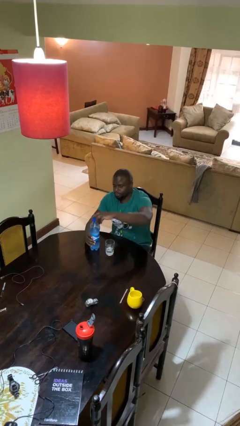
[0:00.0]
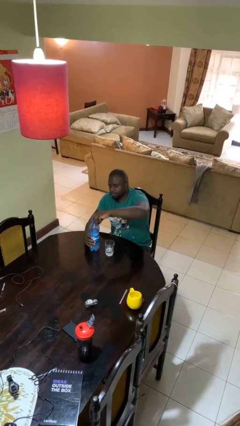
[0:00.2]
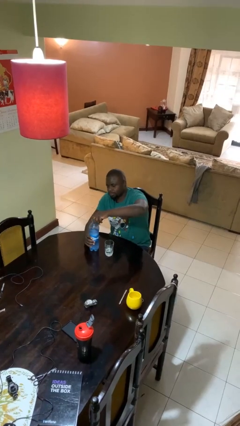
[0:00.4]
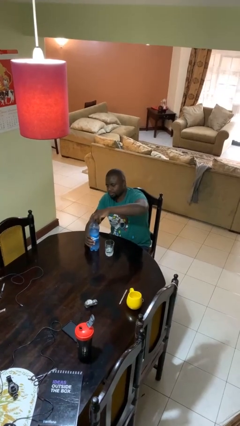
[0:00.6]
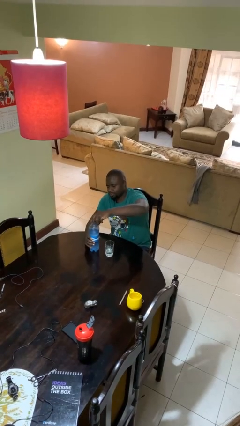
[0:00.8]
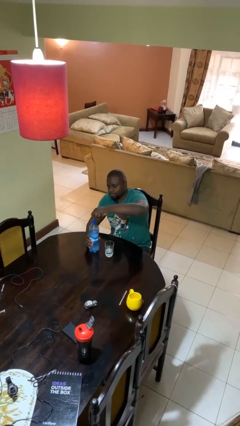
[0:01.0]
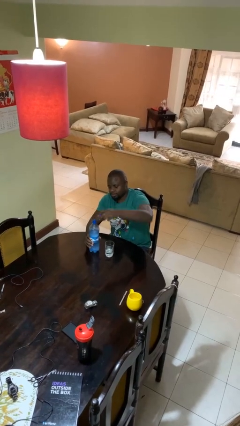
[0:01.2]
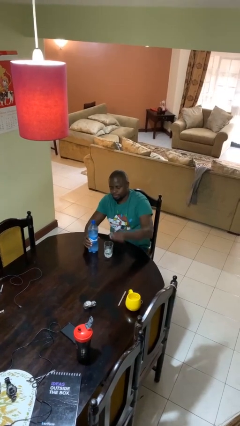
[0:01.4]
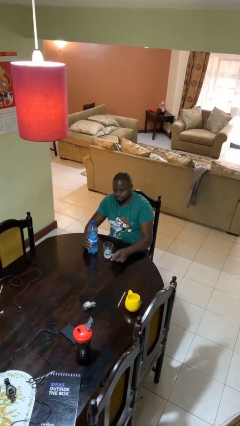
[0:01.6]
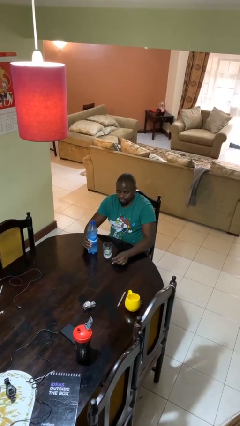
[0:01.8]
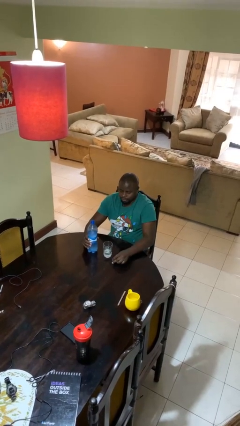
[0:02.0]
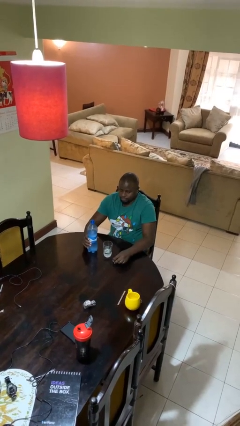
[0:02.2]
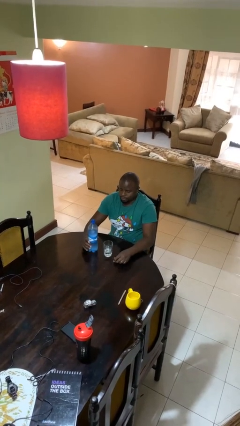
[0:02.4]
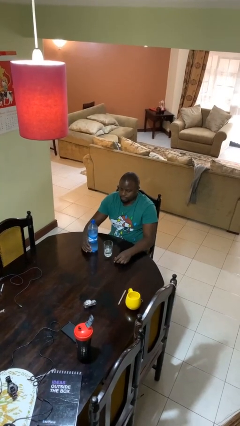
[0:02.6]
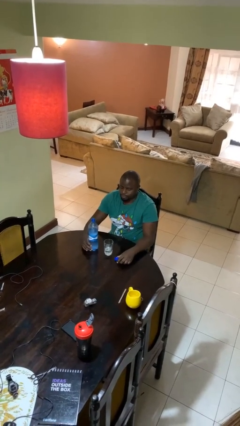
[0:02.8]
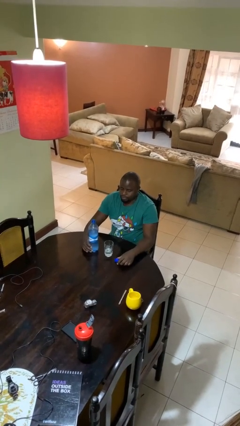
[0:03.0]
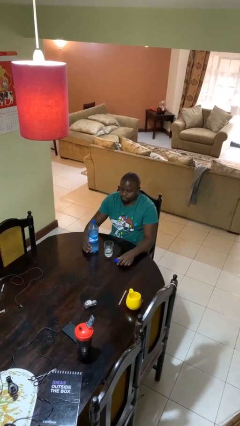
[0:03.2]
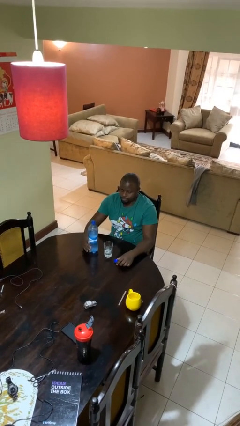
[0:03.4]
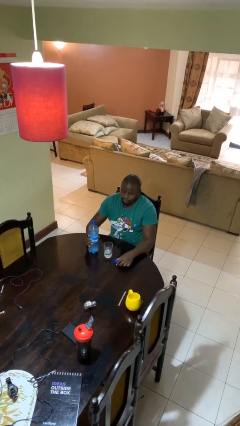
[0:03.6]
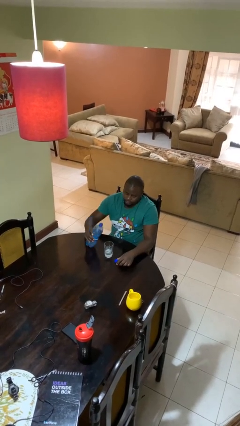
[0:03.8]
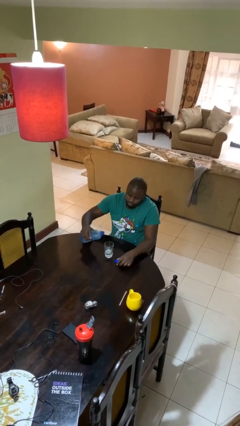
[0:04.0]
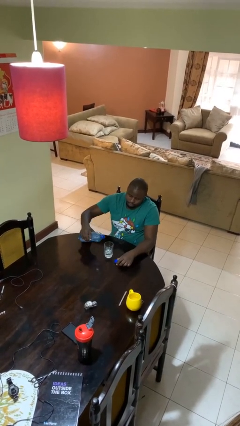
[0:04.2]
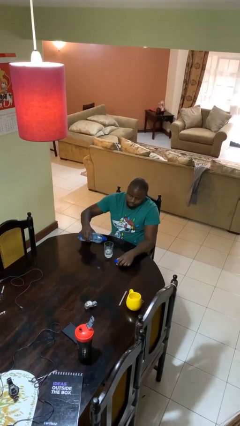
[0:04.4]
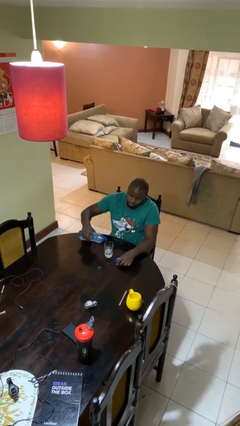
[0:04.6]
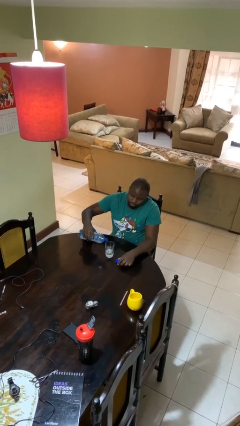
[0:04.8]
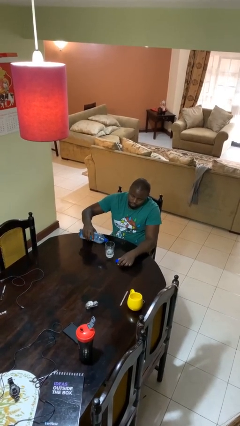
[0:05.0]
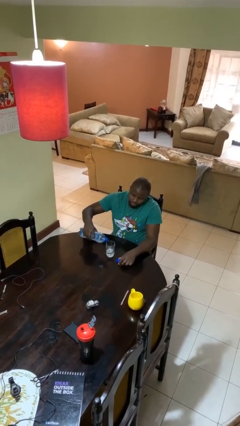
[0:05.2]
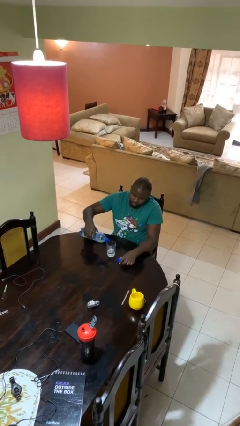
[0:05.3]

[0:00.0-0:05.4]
person unscrews lid from bottle

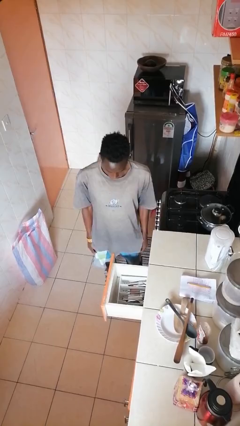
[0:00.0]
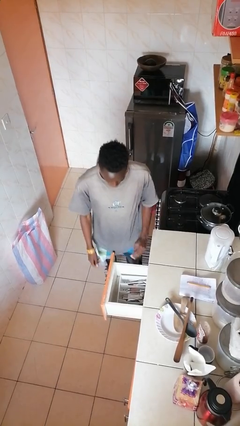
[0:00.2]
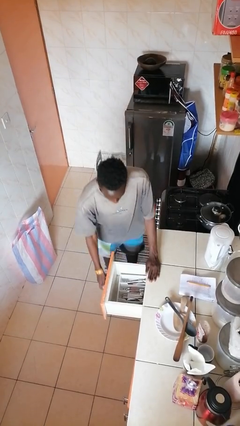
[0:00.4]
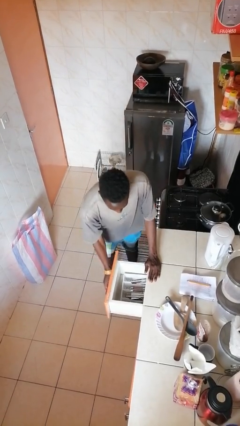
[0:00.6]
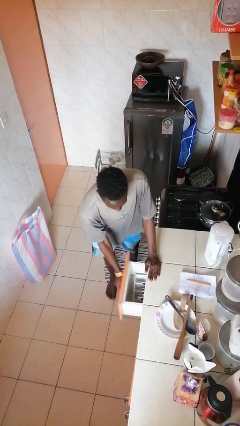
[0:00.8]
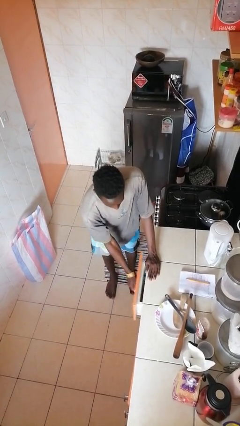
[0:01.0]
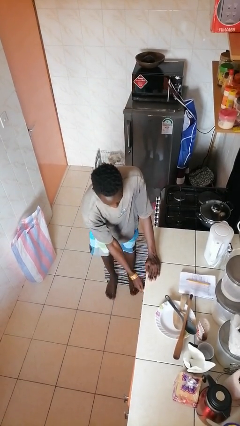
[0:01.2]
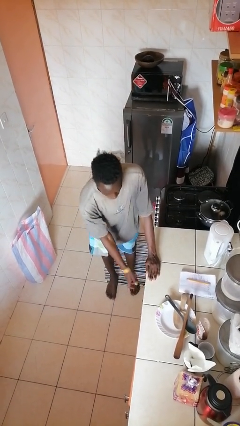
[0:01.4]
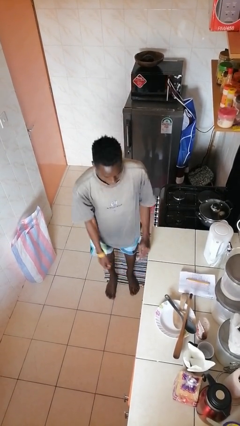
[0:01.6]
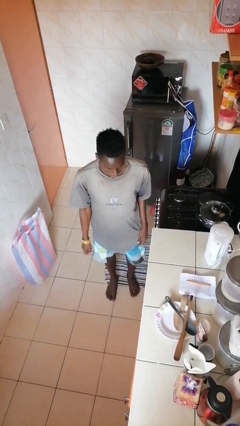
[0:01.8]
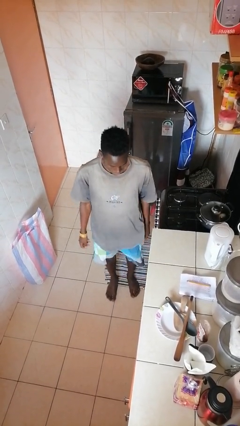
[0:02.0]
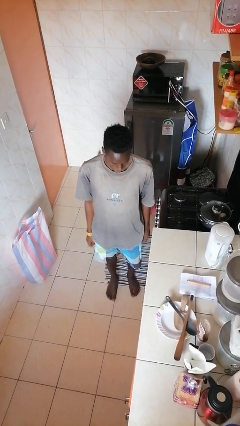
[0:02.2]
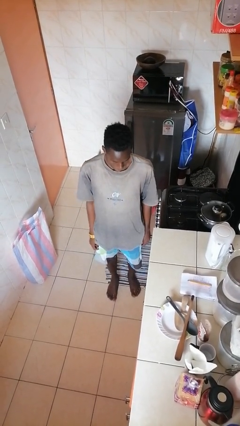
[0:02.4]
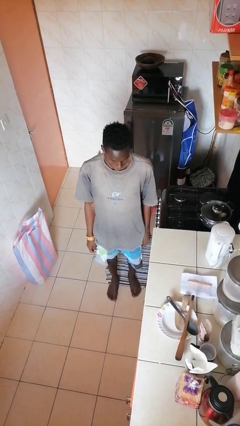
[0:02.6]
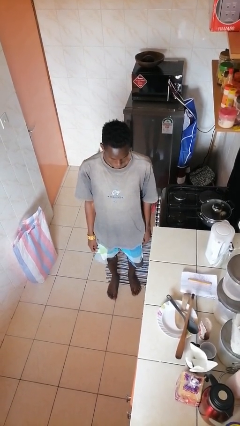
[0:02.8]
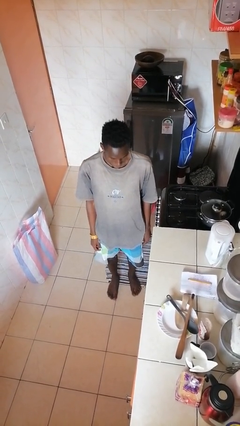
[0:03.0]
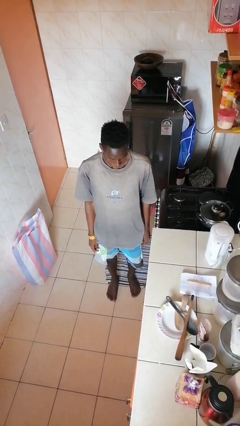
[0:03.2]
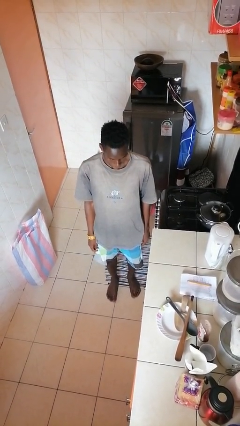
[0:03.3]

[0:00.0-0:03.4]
person closes kitchen drawer

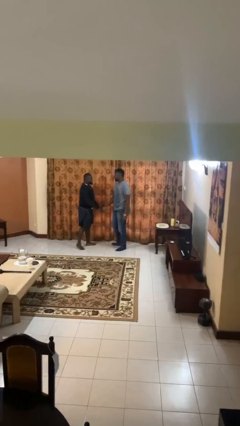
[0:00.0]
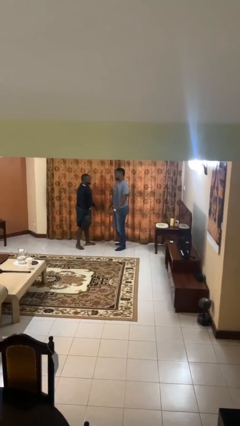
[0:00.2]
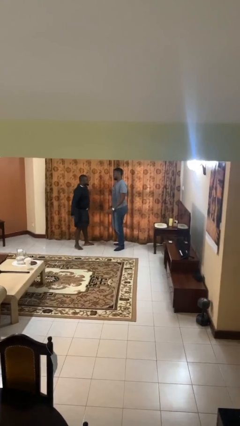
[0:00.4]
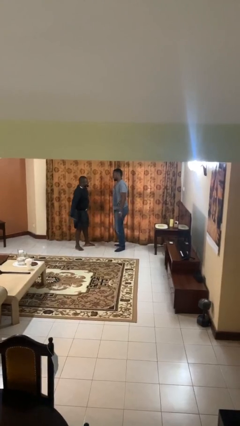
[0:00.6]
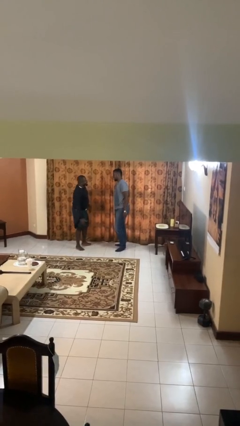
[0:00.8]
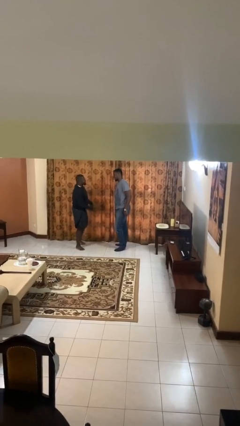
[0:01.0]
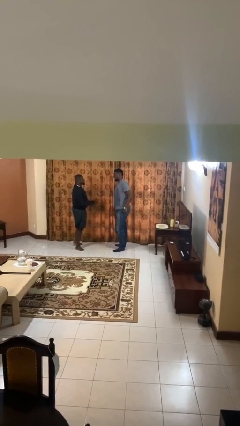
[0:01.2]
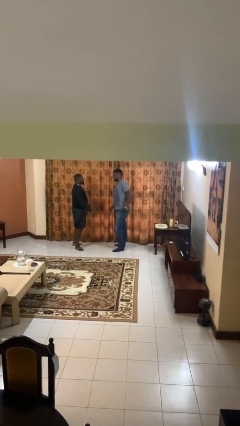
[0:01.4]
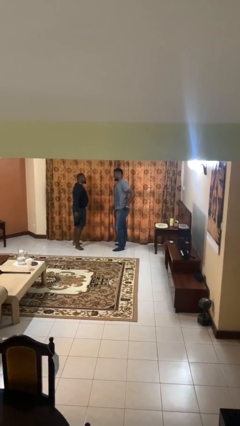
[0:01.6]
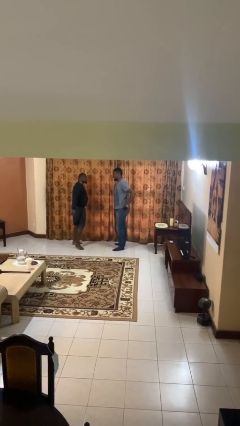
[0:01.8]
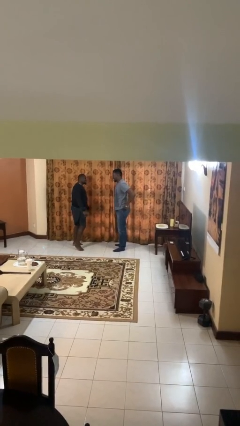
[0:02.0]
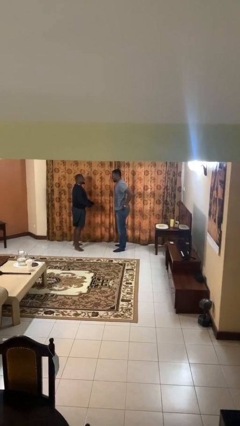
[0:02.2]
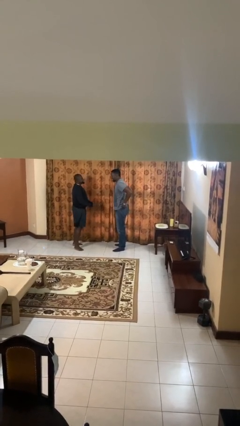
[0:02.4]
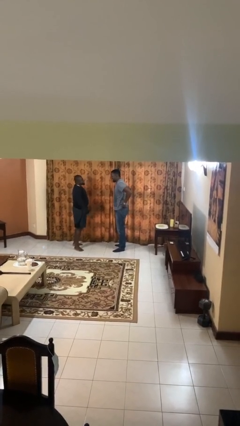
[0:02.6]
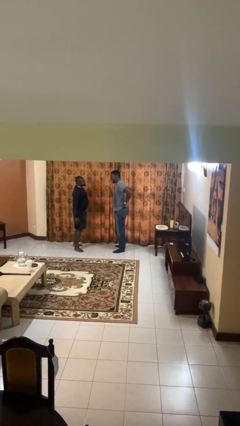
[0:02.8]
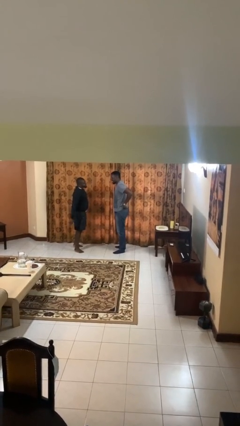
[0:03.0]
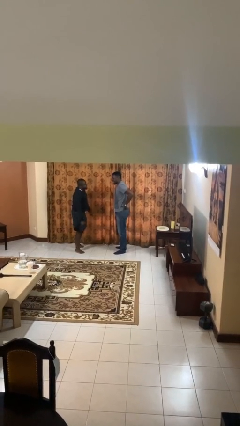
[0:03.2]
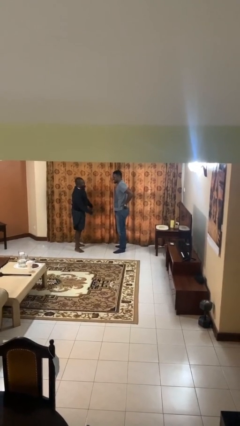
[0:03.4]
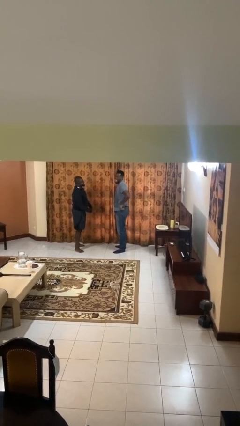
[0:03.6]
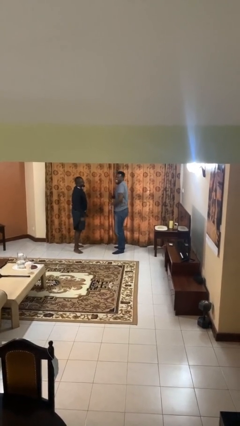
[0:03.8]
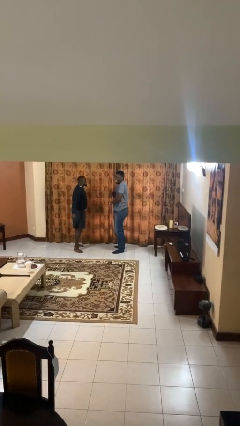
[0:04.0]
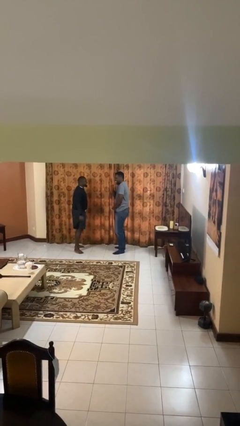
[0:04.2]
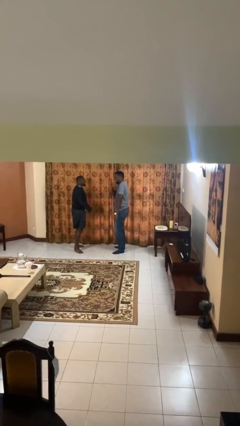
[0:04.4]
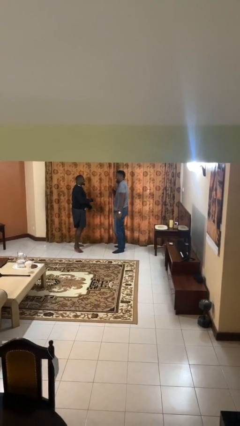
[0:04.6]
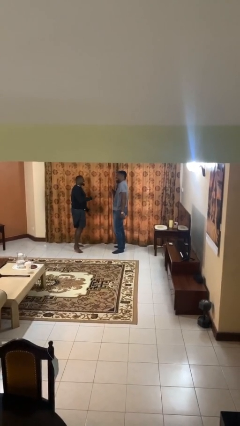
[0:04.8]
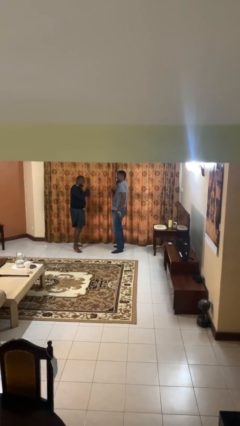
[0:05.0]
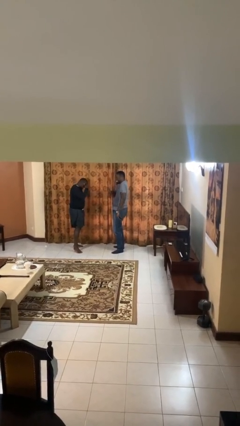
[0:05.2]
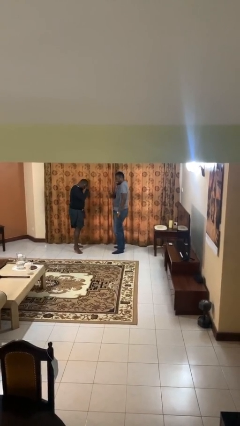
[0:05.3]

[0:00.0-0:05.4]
person talks to person

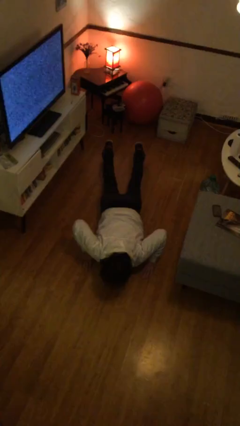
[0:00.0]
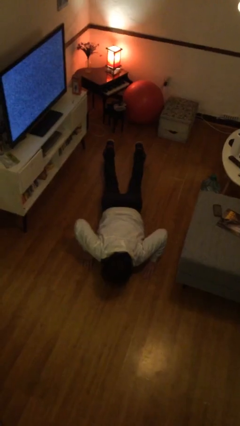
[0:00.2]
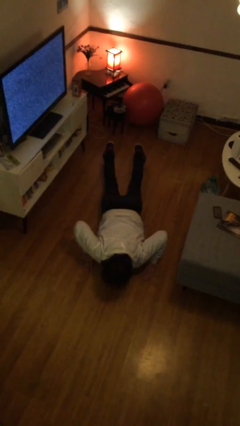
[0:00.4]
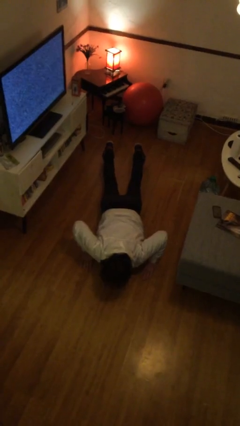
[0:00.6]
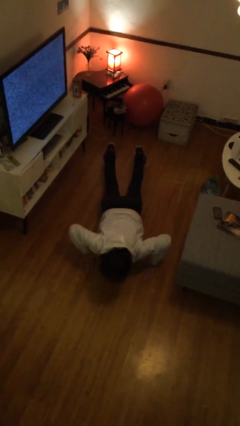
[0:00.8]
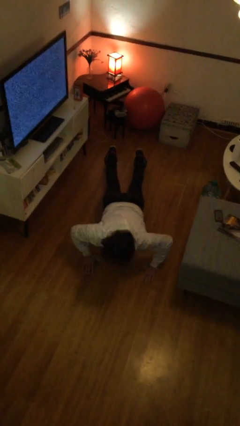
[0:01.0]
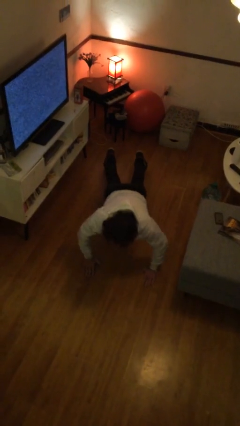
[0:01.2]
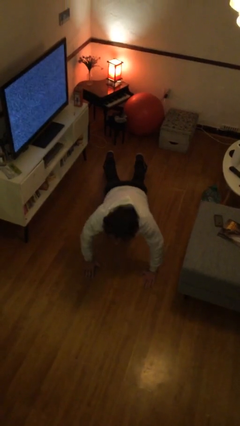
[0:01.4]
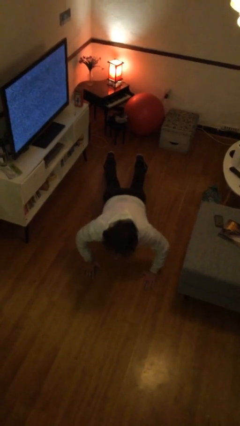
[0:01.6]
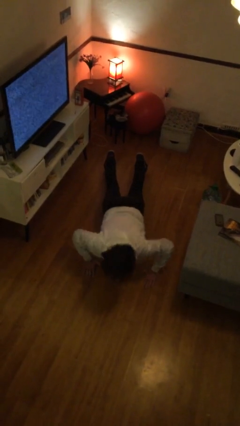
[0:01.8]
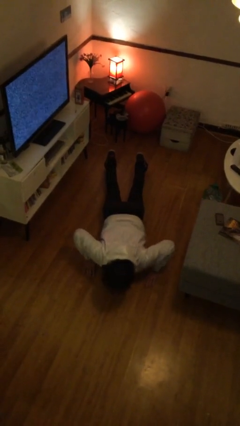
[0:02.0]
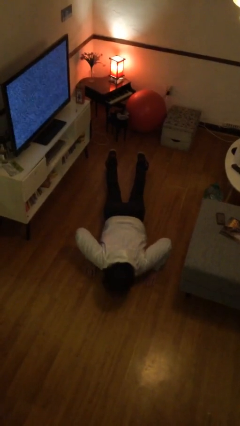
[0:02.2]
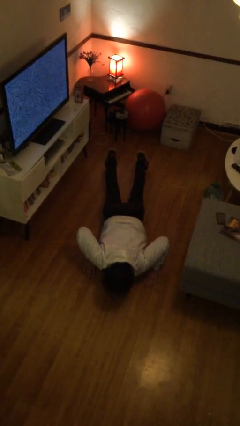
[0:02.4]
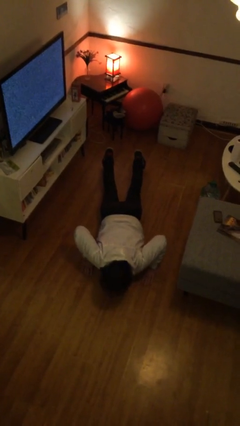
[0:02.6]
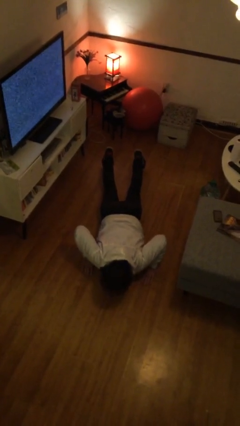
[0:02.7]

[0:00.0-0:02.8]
person exercises with pushup

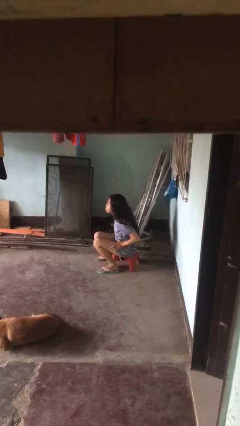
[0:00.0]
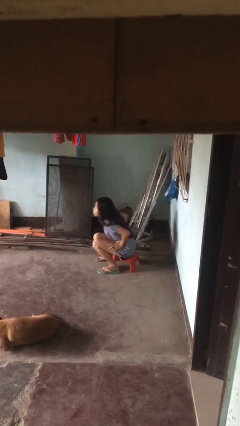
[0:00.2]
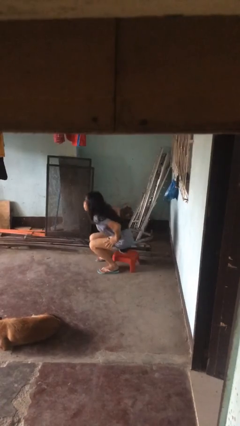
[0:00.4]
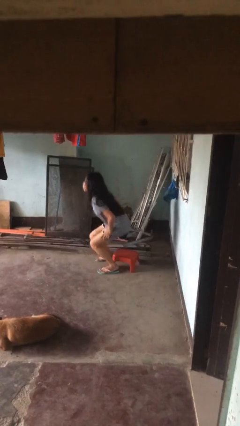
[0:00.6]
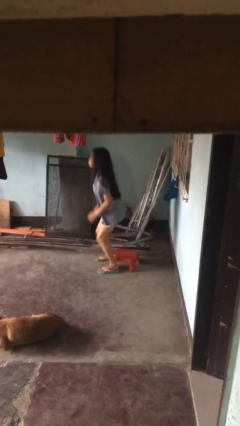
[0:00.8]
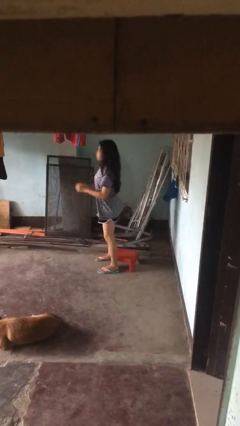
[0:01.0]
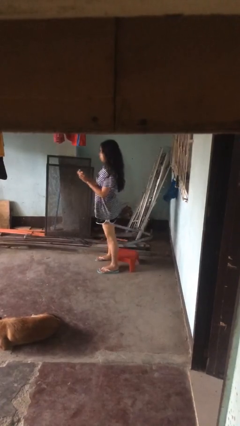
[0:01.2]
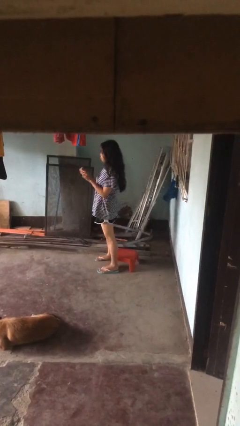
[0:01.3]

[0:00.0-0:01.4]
person stands up
